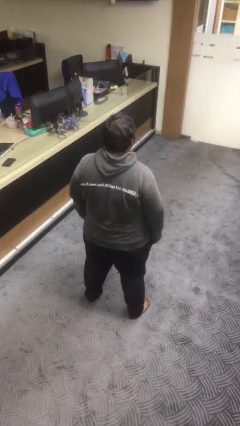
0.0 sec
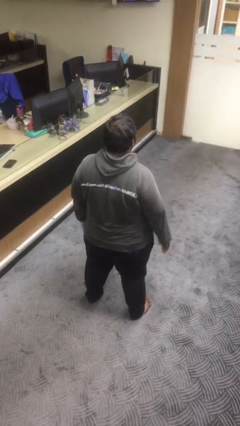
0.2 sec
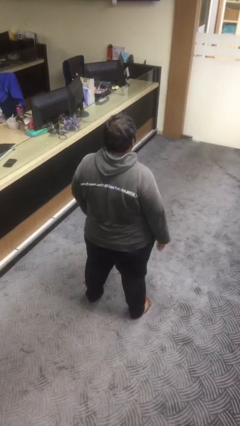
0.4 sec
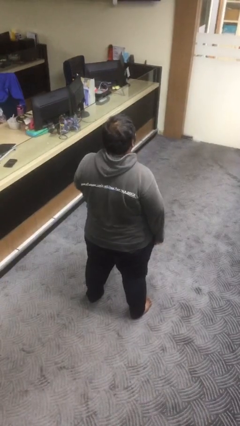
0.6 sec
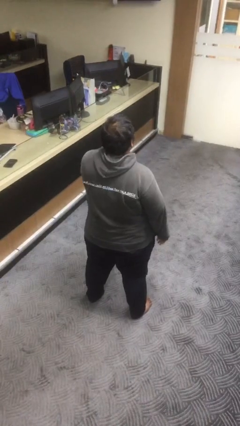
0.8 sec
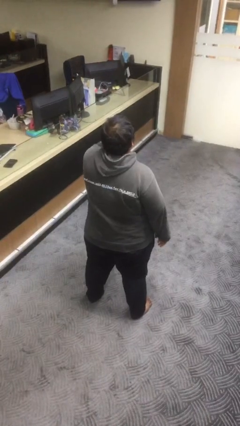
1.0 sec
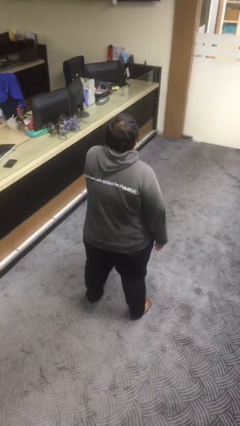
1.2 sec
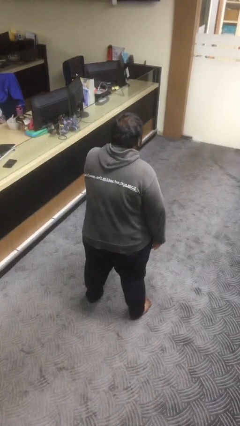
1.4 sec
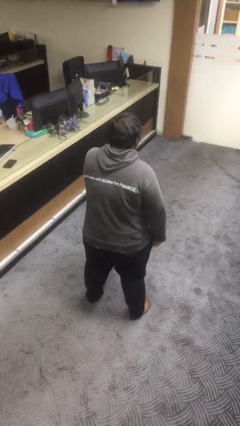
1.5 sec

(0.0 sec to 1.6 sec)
person sneezes into hand

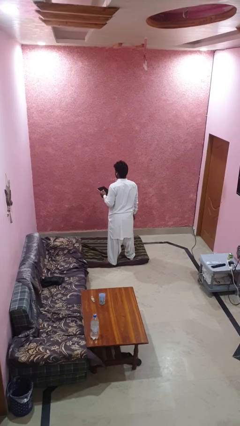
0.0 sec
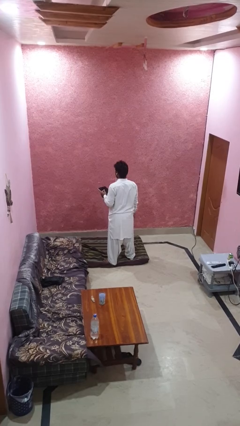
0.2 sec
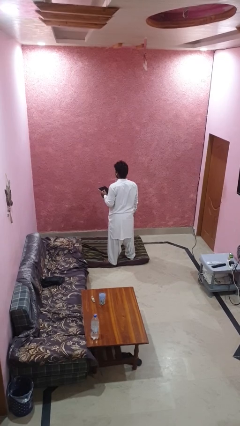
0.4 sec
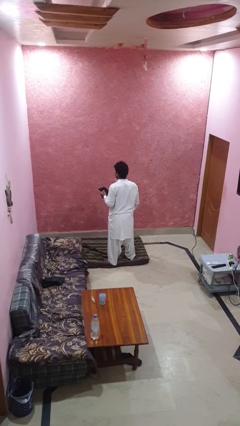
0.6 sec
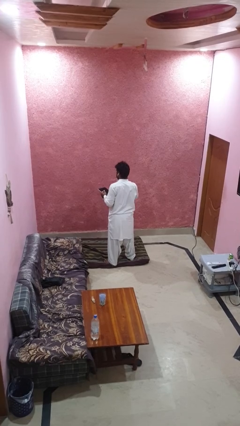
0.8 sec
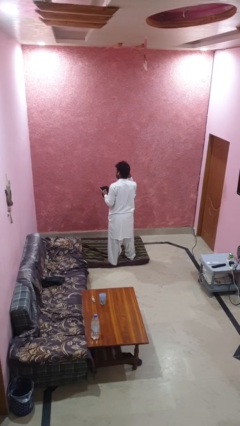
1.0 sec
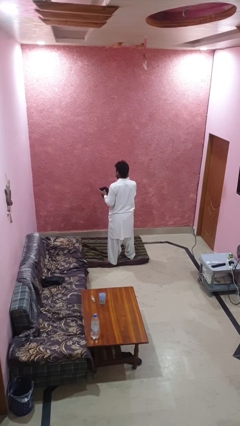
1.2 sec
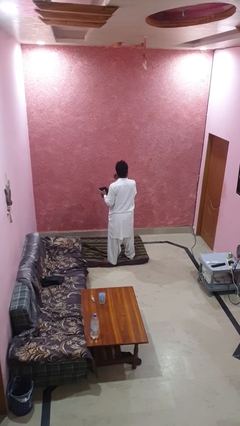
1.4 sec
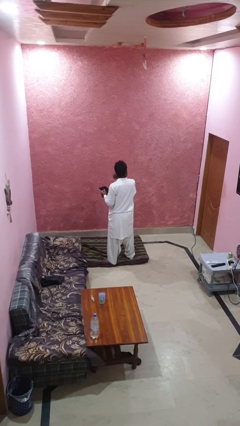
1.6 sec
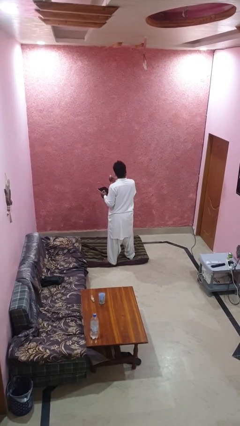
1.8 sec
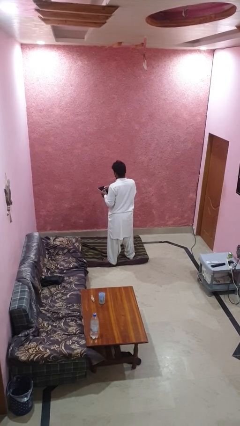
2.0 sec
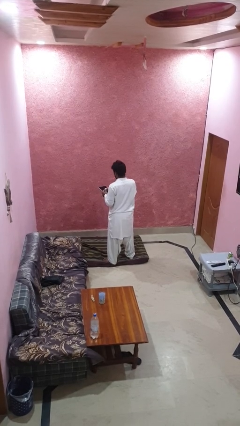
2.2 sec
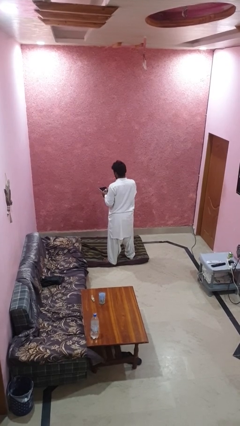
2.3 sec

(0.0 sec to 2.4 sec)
person takes off headphones

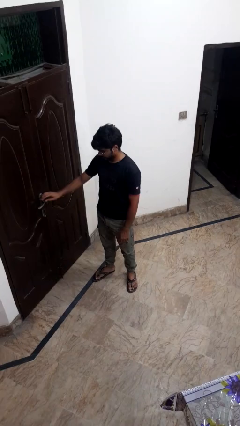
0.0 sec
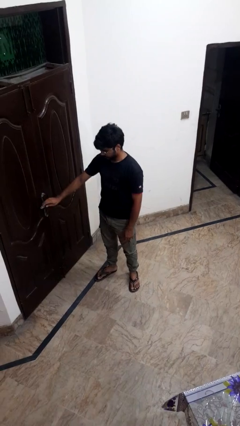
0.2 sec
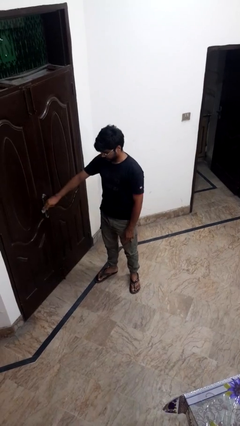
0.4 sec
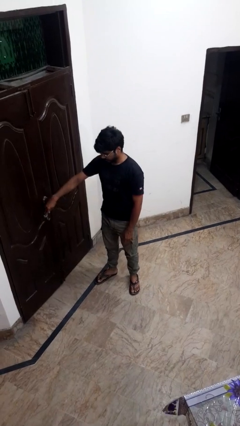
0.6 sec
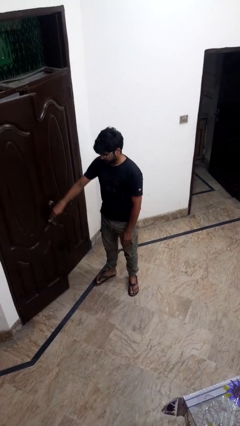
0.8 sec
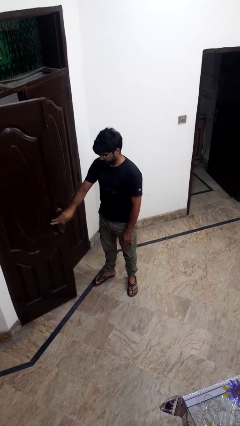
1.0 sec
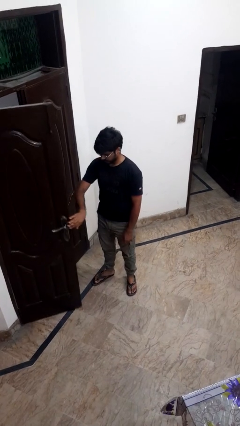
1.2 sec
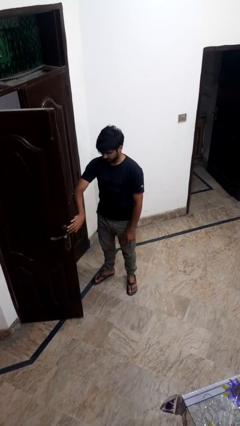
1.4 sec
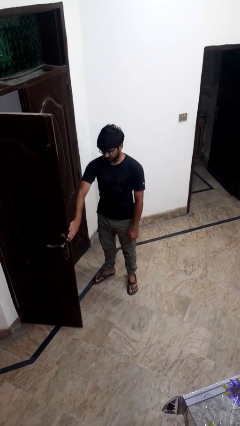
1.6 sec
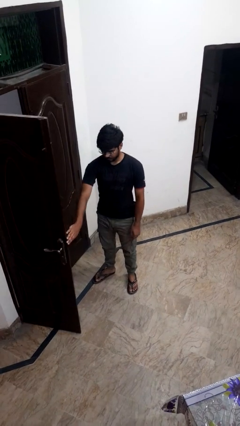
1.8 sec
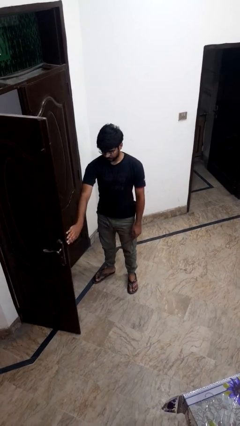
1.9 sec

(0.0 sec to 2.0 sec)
person opens facility door

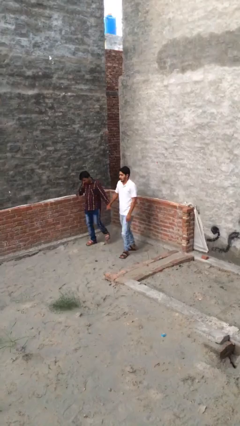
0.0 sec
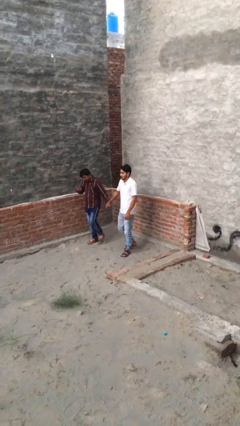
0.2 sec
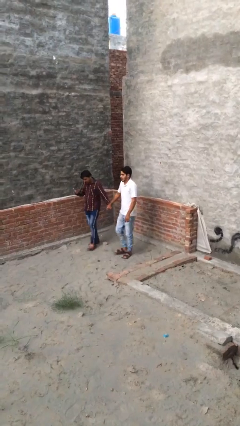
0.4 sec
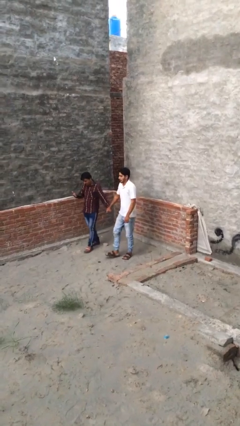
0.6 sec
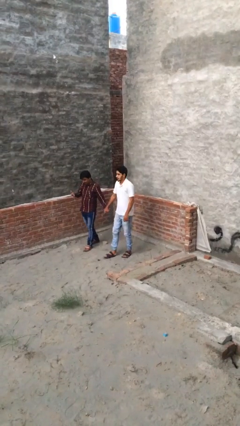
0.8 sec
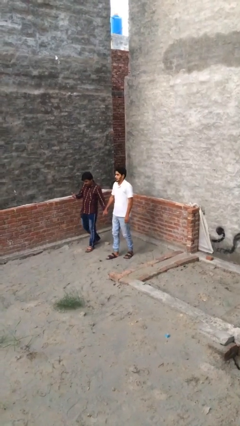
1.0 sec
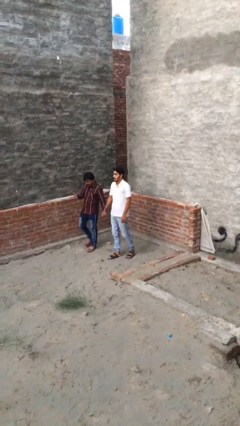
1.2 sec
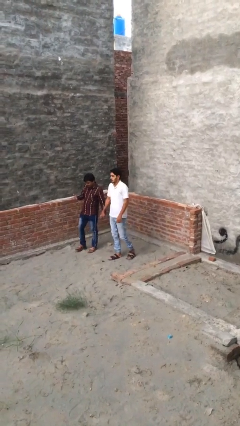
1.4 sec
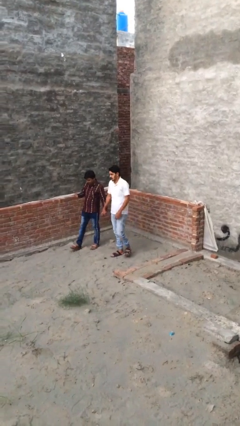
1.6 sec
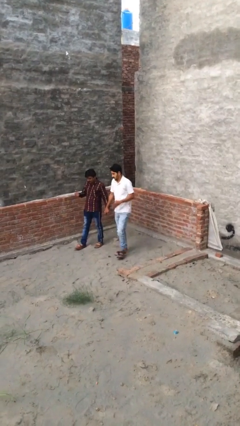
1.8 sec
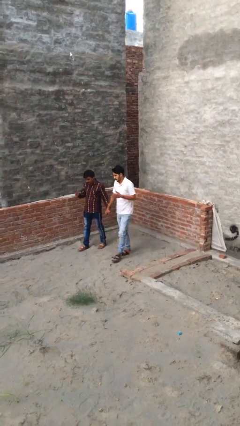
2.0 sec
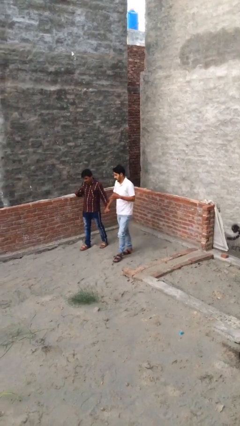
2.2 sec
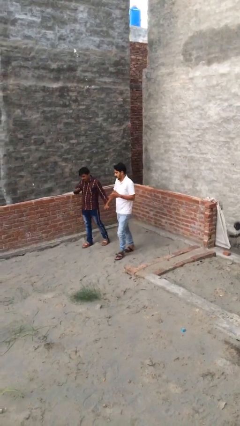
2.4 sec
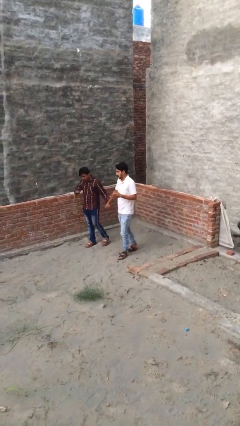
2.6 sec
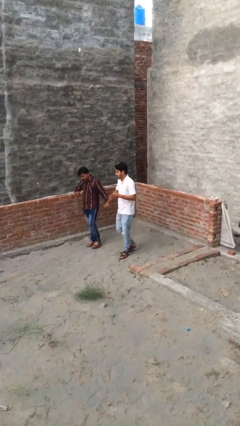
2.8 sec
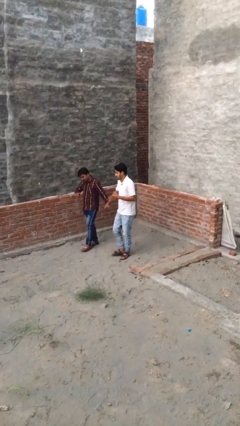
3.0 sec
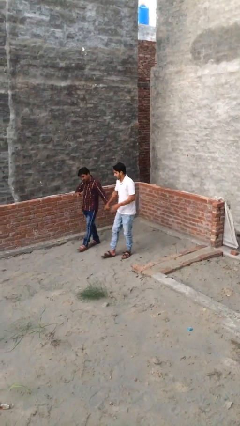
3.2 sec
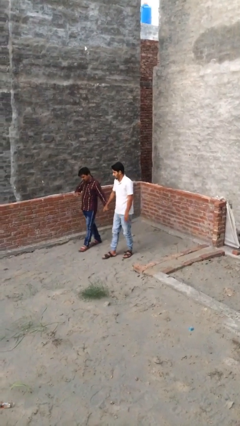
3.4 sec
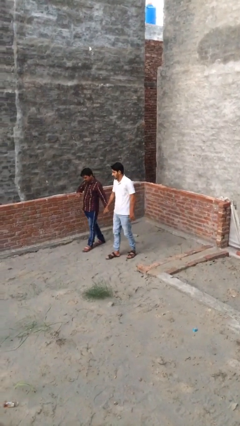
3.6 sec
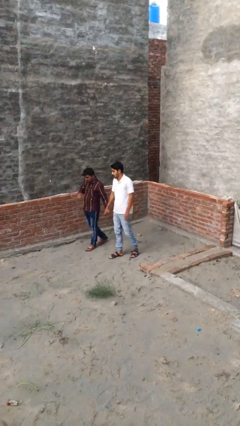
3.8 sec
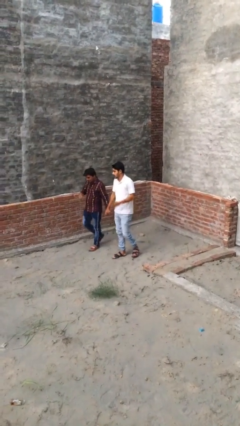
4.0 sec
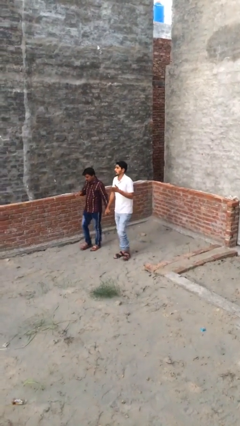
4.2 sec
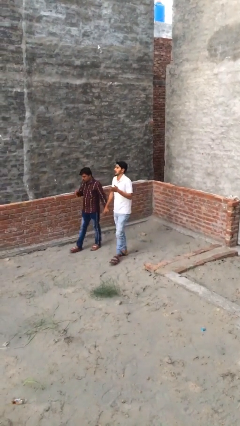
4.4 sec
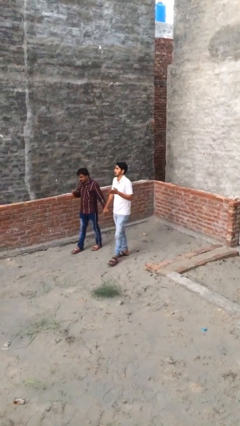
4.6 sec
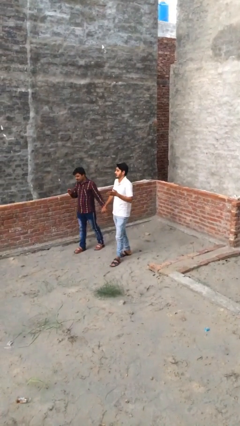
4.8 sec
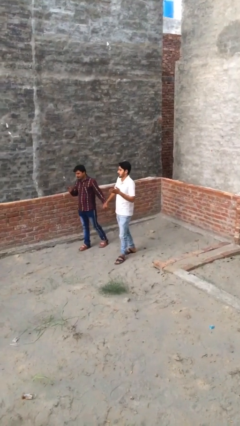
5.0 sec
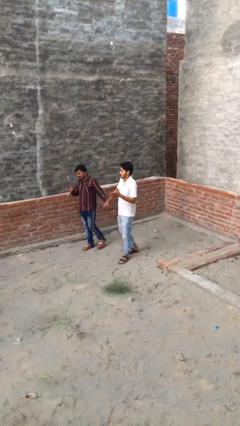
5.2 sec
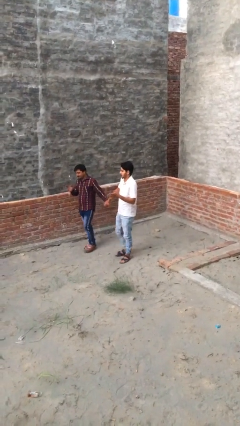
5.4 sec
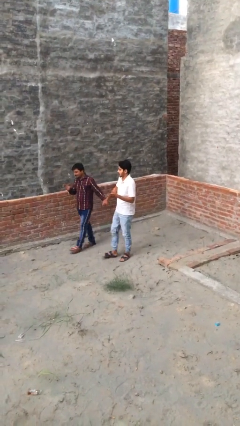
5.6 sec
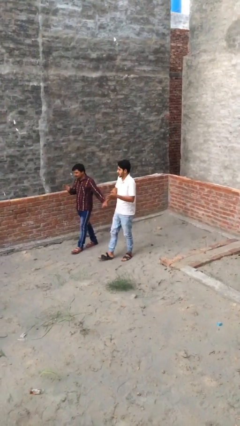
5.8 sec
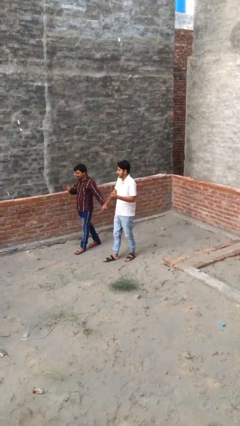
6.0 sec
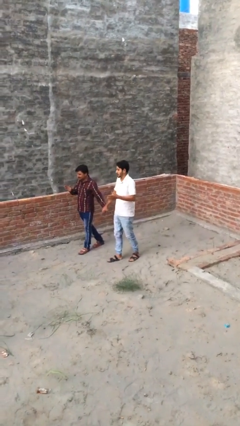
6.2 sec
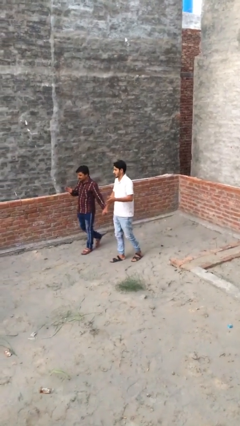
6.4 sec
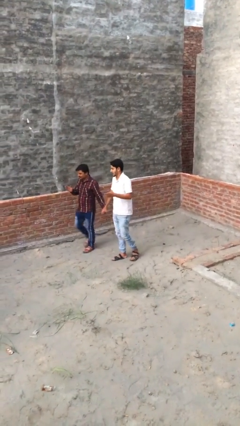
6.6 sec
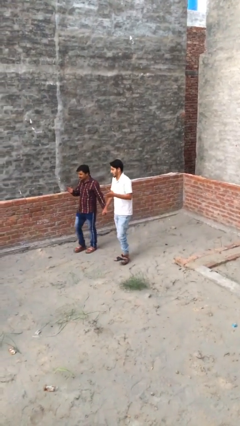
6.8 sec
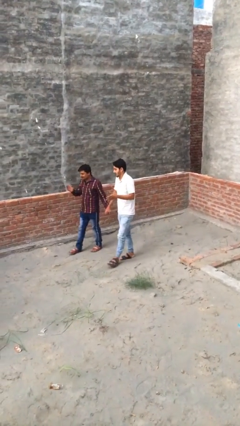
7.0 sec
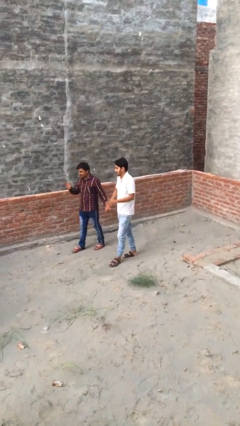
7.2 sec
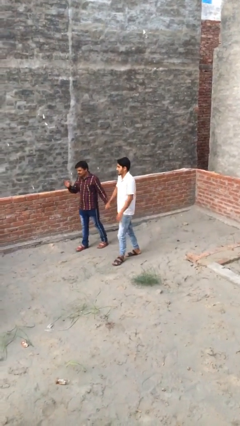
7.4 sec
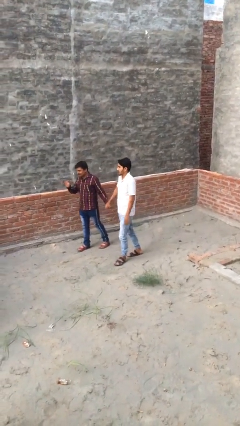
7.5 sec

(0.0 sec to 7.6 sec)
person holds hand

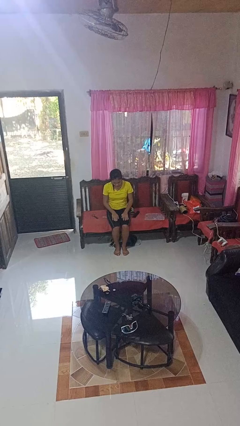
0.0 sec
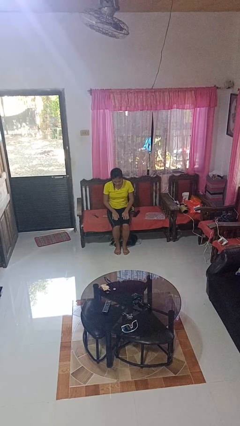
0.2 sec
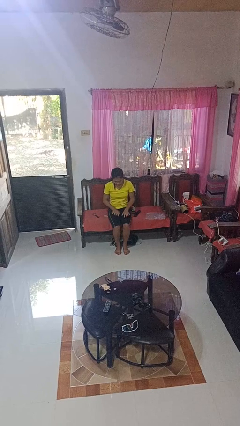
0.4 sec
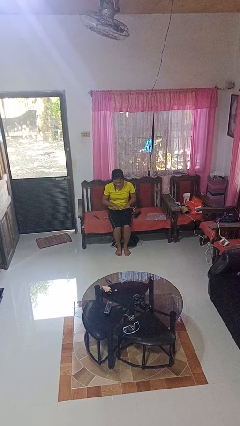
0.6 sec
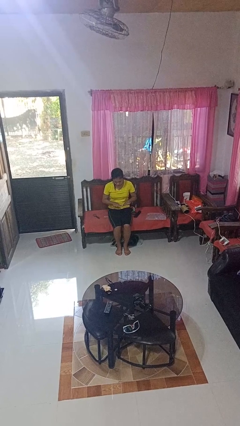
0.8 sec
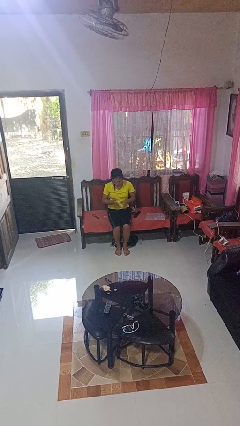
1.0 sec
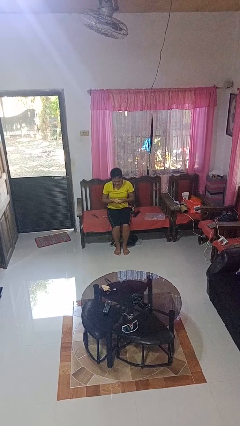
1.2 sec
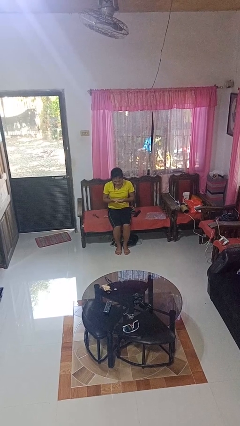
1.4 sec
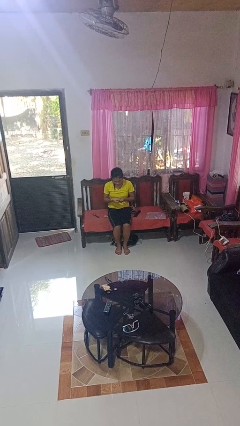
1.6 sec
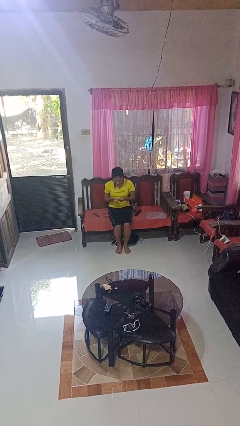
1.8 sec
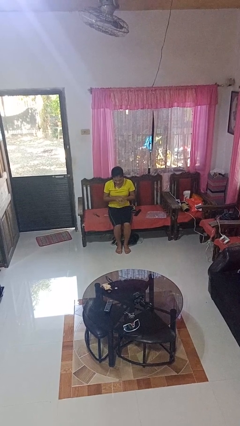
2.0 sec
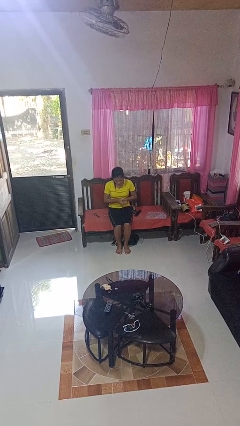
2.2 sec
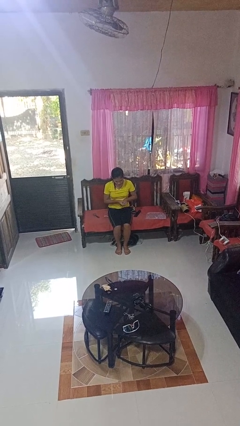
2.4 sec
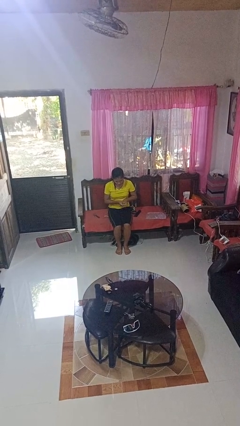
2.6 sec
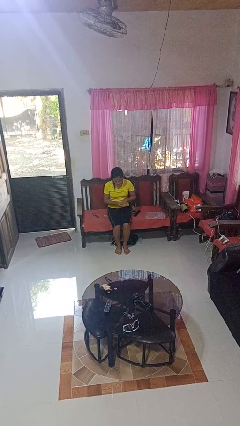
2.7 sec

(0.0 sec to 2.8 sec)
person looks at hands in lap

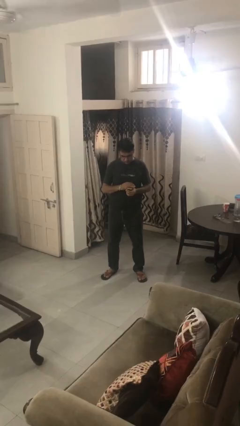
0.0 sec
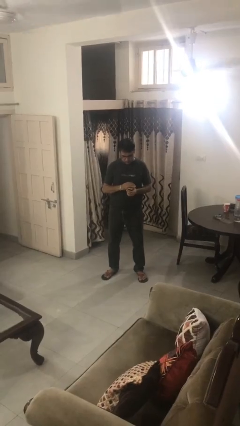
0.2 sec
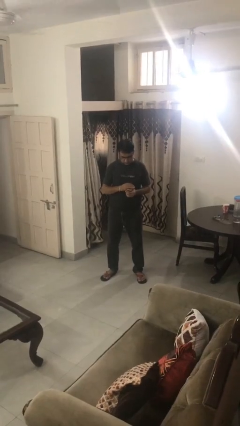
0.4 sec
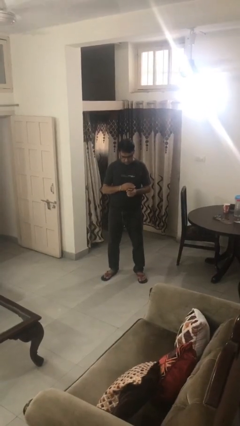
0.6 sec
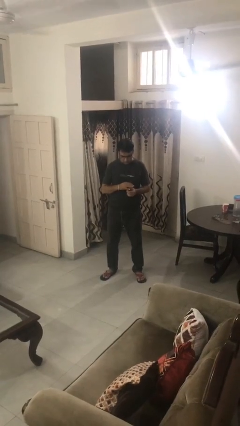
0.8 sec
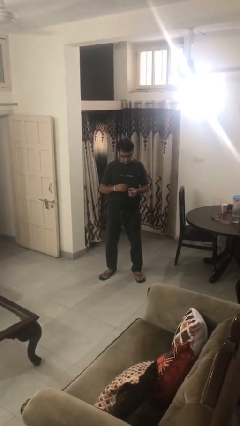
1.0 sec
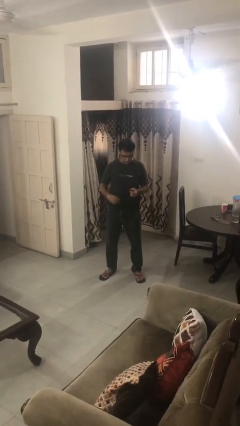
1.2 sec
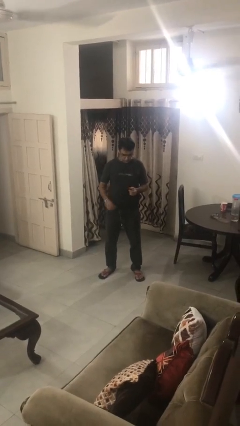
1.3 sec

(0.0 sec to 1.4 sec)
person takes off ring
